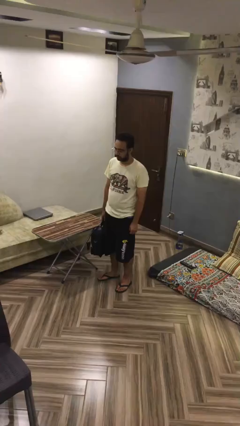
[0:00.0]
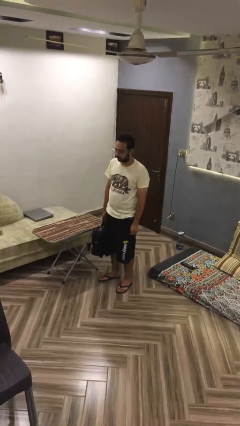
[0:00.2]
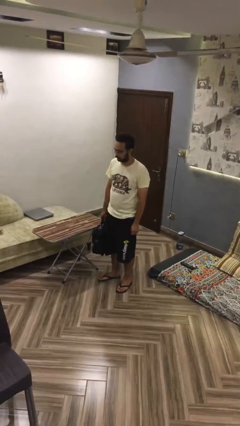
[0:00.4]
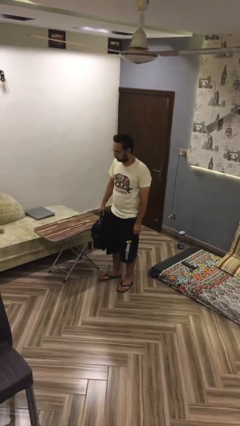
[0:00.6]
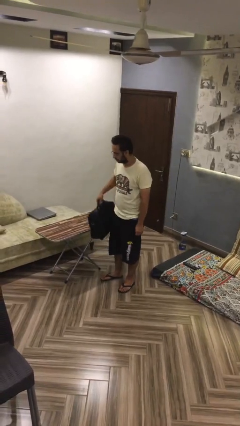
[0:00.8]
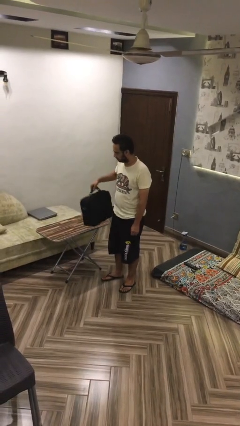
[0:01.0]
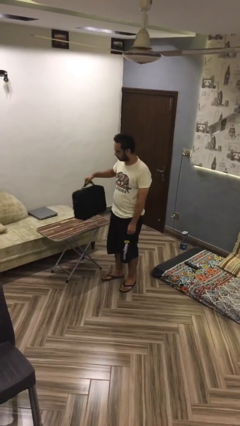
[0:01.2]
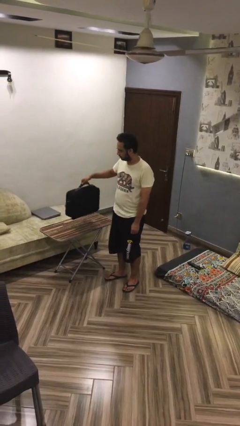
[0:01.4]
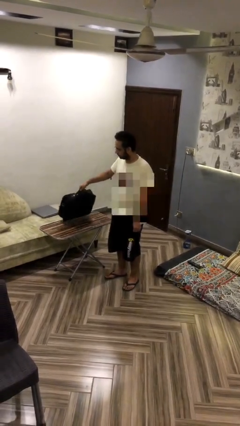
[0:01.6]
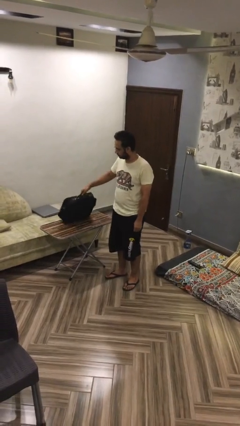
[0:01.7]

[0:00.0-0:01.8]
person puts down object on table

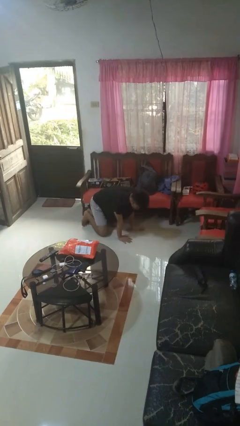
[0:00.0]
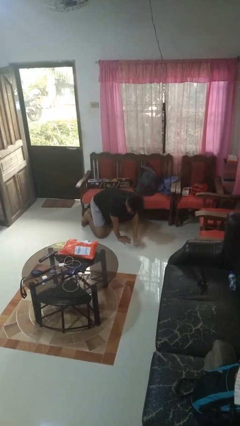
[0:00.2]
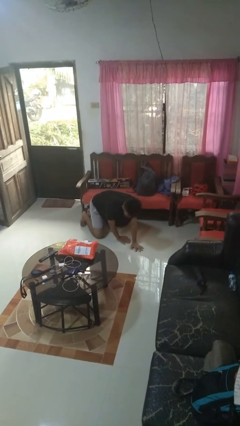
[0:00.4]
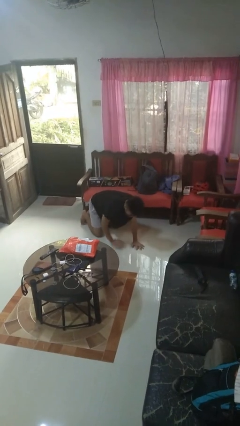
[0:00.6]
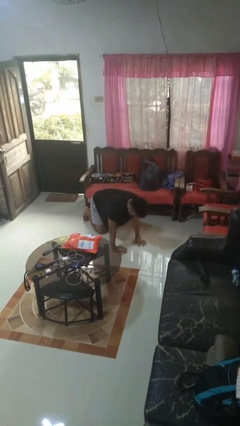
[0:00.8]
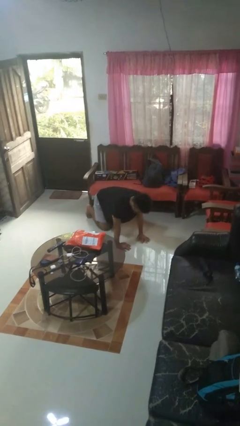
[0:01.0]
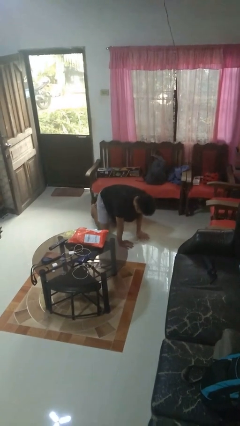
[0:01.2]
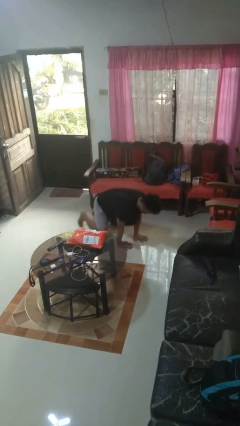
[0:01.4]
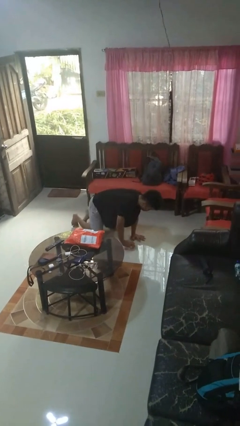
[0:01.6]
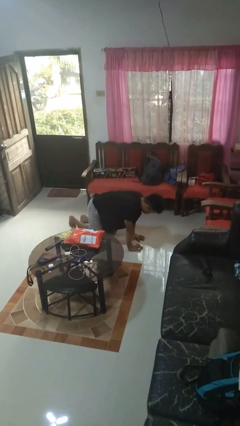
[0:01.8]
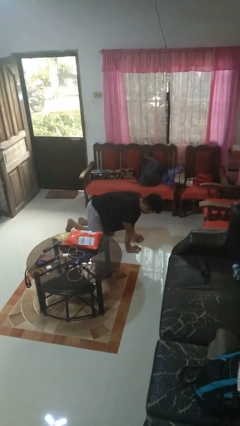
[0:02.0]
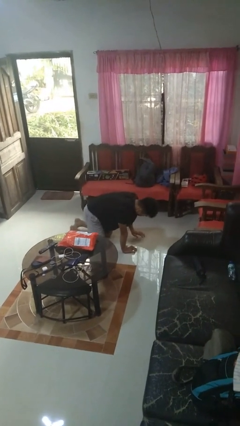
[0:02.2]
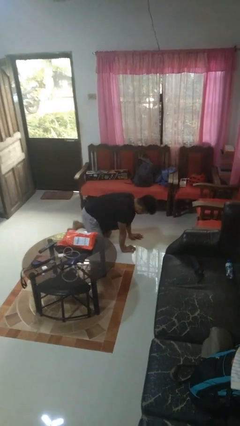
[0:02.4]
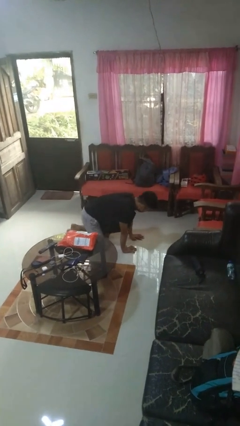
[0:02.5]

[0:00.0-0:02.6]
person crawls

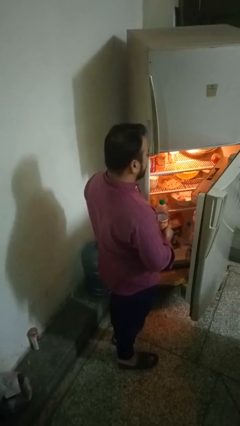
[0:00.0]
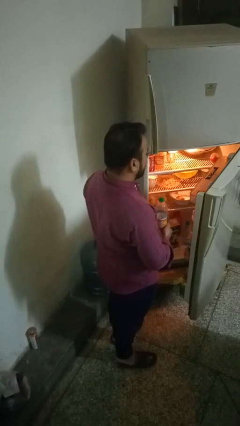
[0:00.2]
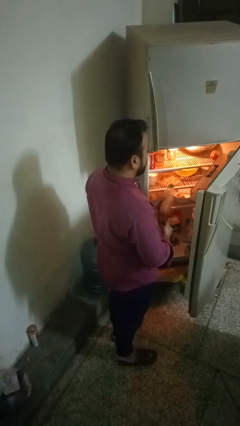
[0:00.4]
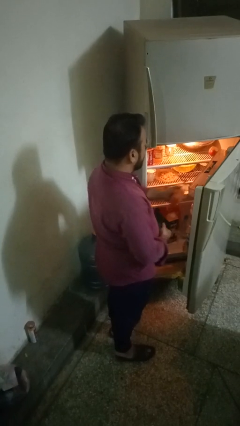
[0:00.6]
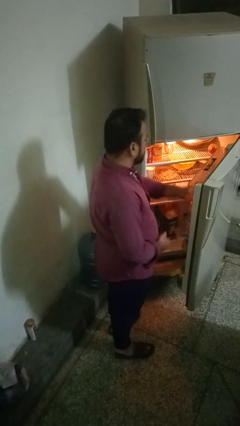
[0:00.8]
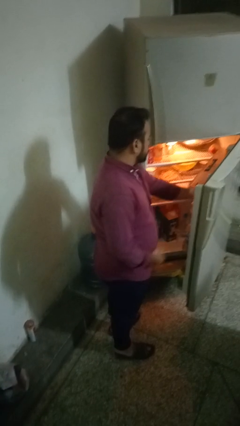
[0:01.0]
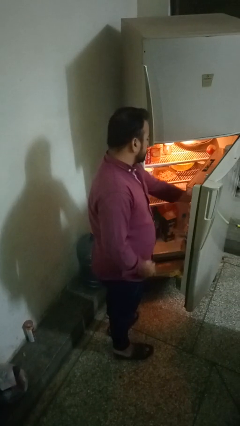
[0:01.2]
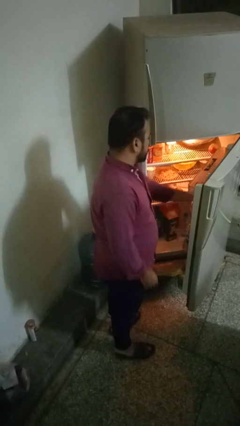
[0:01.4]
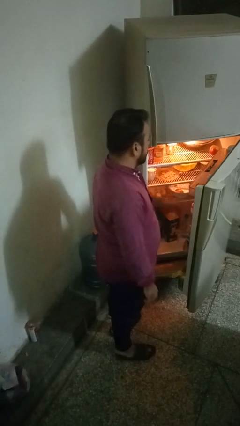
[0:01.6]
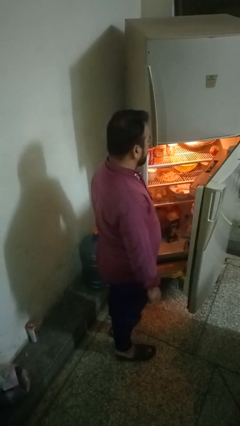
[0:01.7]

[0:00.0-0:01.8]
person puts object into refrigerator

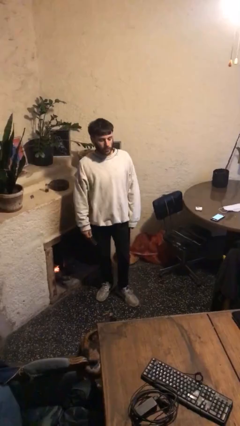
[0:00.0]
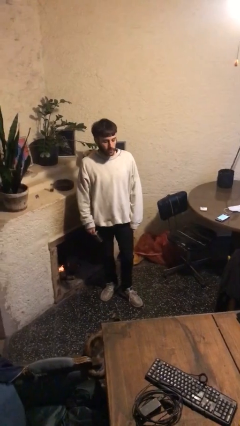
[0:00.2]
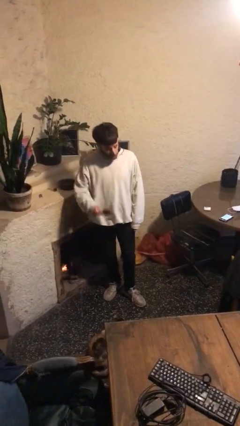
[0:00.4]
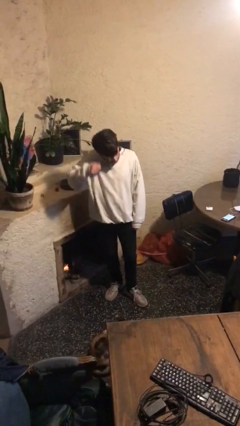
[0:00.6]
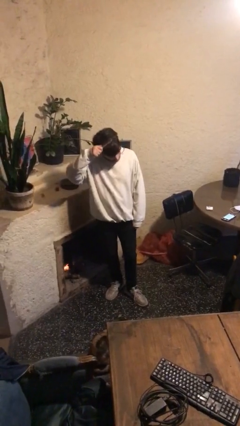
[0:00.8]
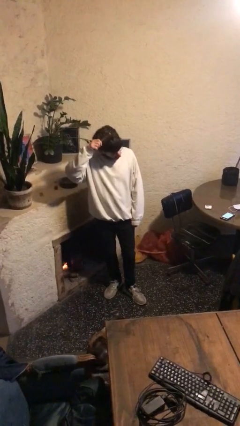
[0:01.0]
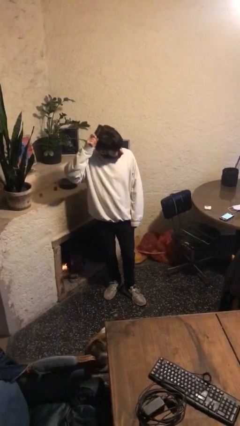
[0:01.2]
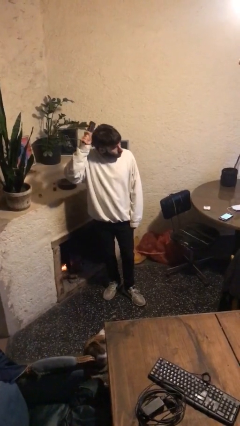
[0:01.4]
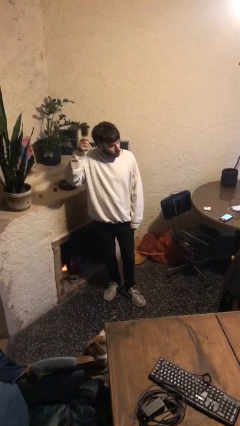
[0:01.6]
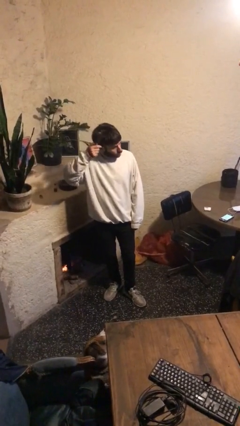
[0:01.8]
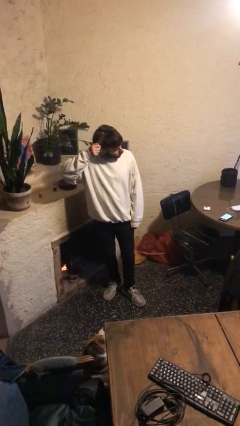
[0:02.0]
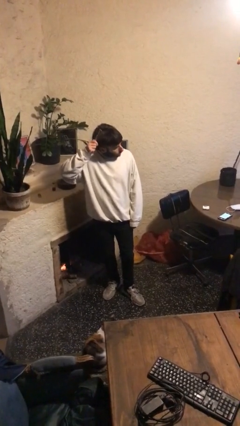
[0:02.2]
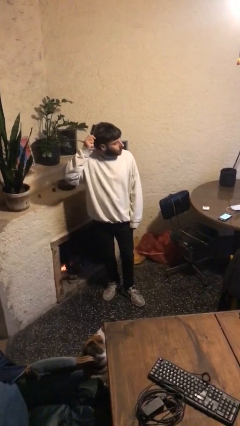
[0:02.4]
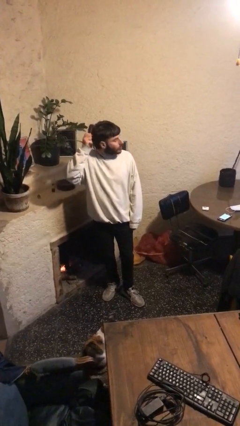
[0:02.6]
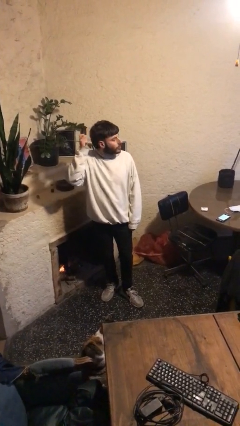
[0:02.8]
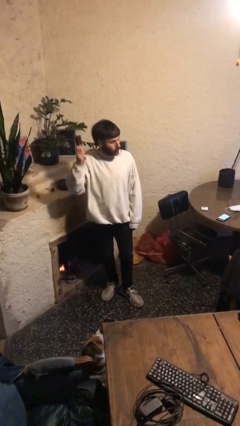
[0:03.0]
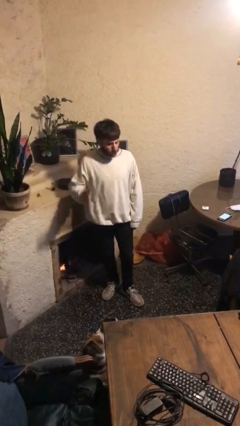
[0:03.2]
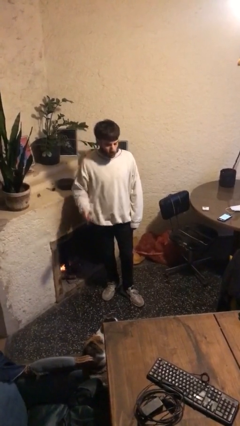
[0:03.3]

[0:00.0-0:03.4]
person brushes hair

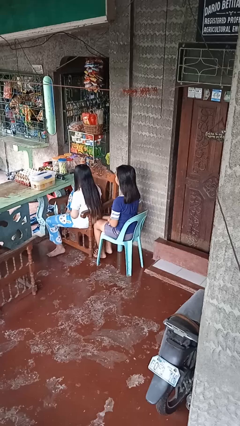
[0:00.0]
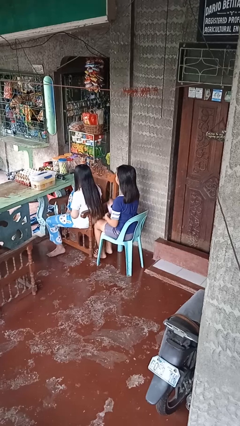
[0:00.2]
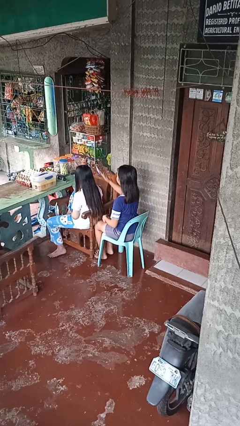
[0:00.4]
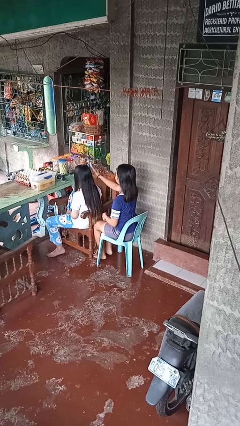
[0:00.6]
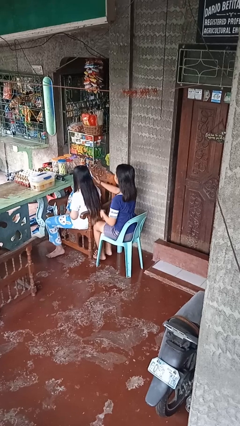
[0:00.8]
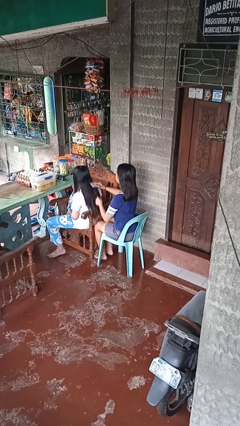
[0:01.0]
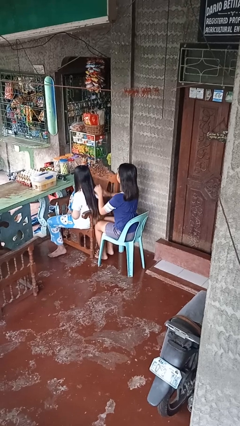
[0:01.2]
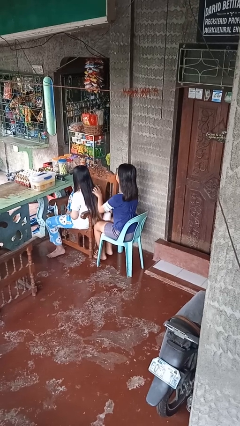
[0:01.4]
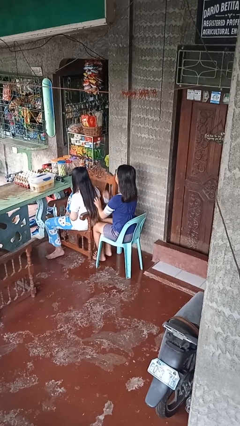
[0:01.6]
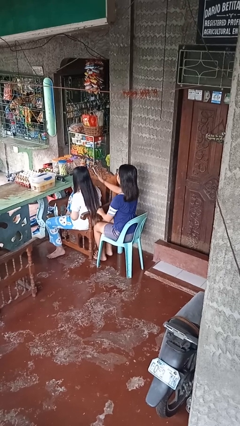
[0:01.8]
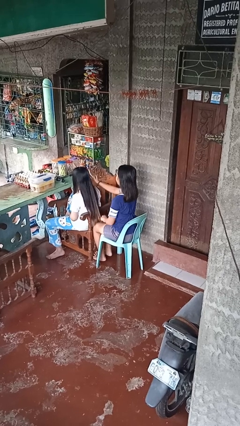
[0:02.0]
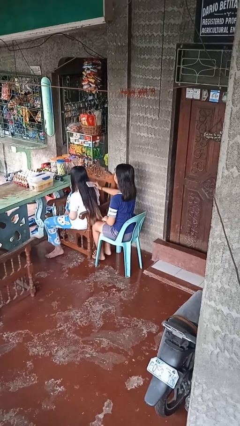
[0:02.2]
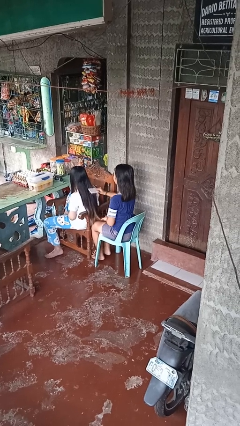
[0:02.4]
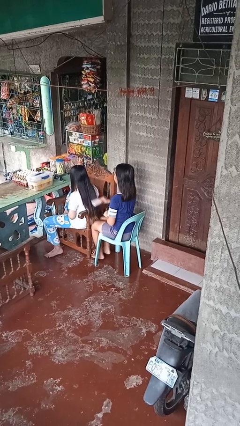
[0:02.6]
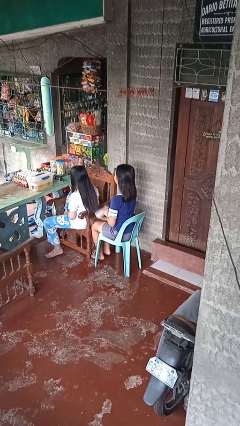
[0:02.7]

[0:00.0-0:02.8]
person brushes hair of person

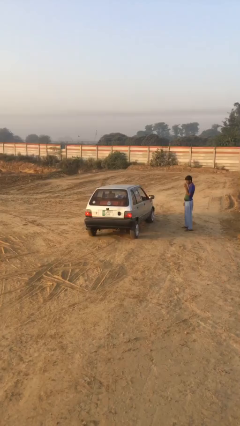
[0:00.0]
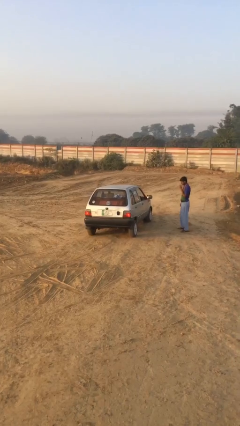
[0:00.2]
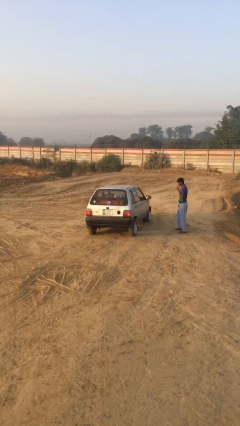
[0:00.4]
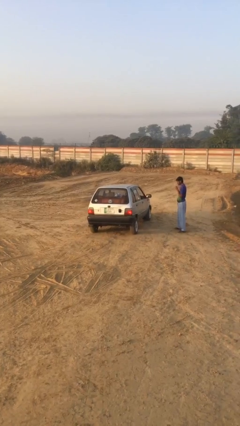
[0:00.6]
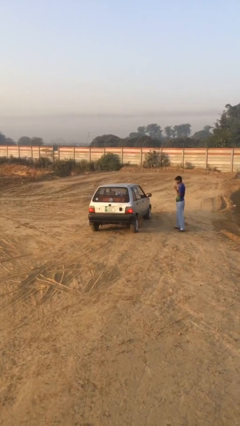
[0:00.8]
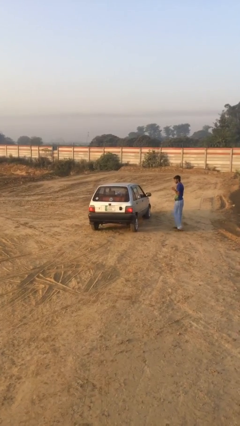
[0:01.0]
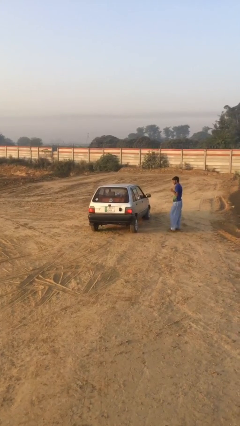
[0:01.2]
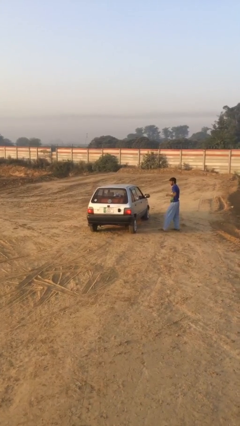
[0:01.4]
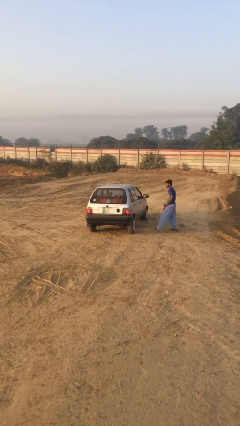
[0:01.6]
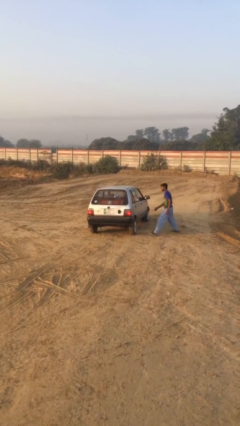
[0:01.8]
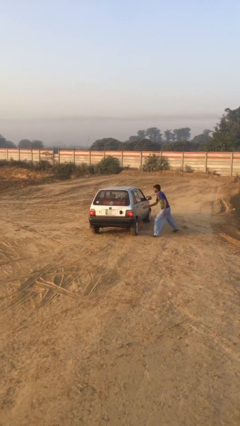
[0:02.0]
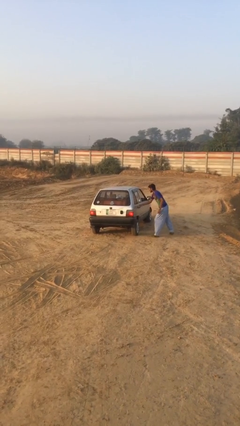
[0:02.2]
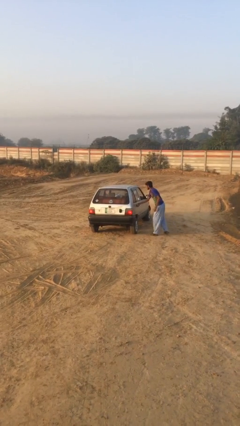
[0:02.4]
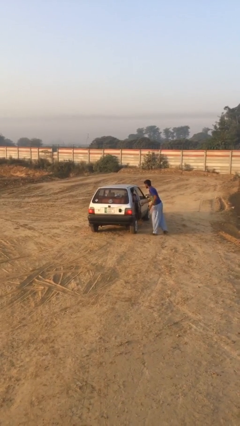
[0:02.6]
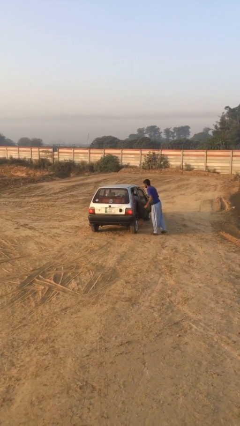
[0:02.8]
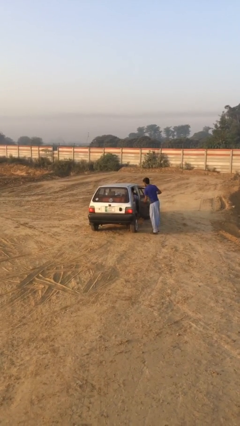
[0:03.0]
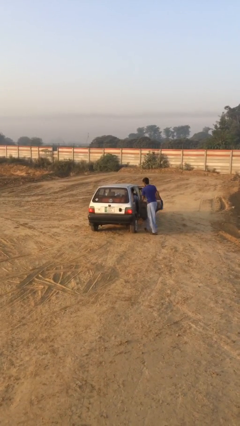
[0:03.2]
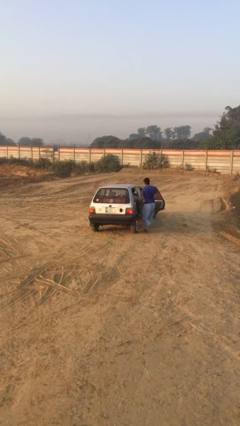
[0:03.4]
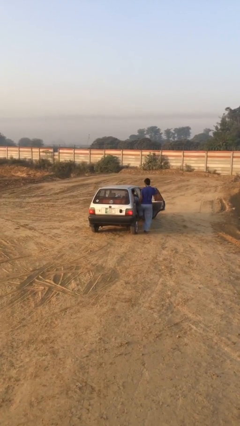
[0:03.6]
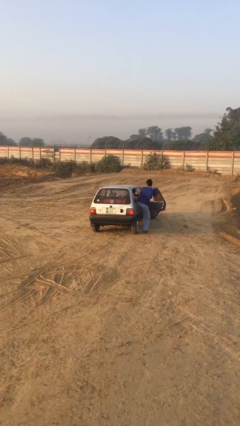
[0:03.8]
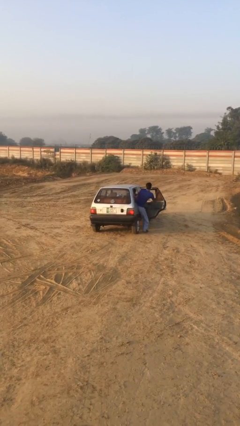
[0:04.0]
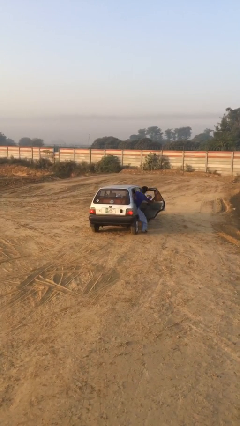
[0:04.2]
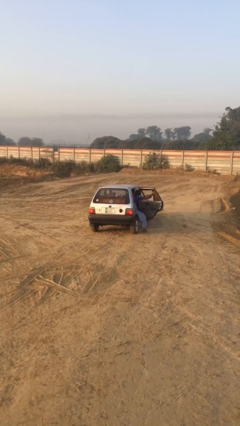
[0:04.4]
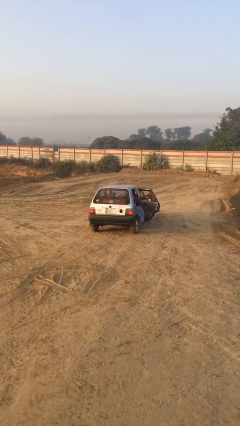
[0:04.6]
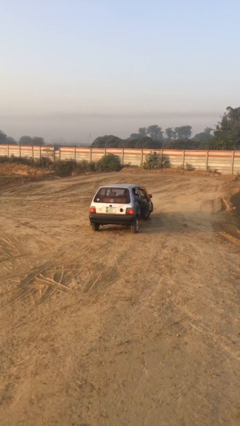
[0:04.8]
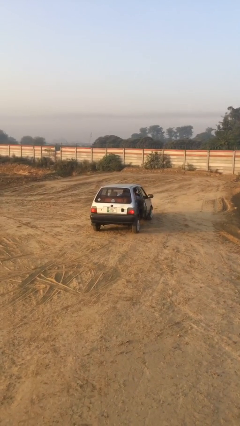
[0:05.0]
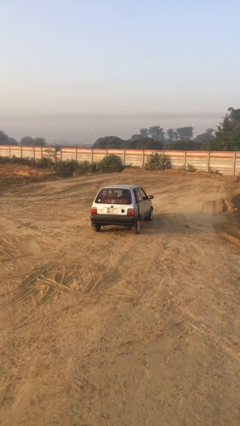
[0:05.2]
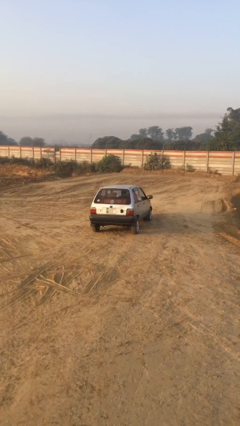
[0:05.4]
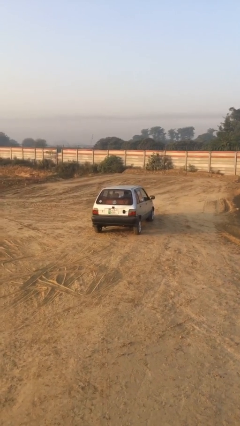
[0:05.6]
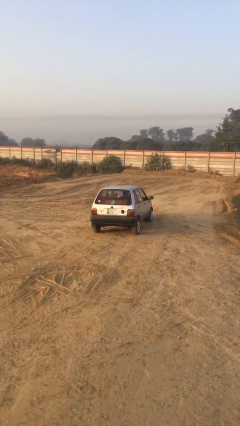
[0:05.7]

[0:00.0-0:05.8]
car picks up person
